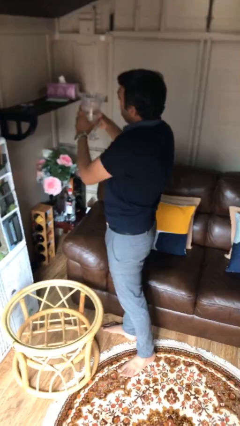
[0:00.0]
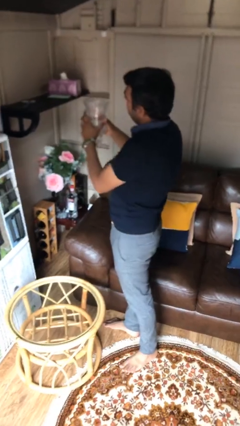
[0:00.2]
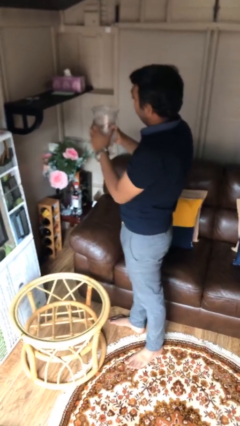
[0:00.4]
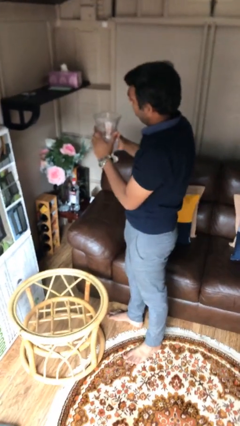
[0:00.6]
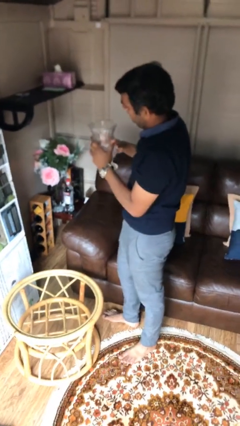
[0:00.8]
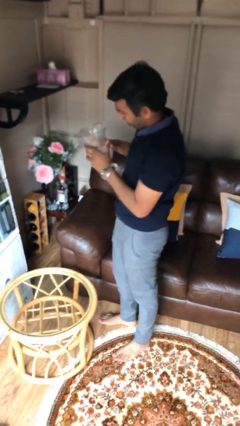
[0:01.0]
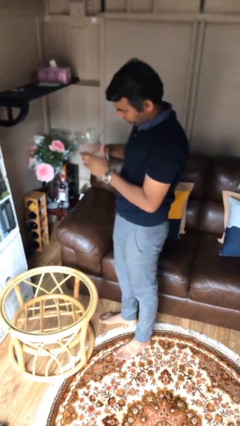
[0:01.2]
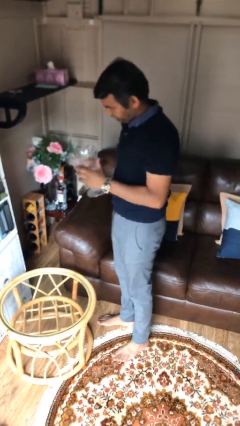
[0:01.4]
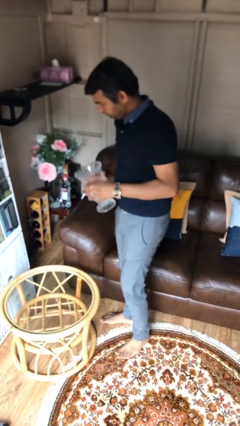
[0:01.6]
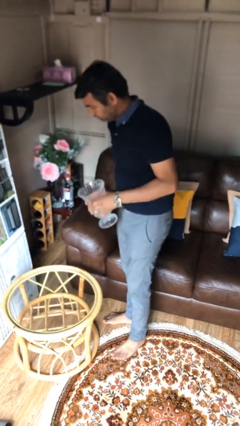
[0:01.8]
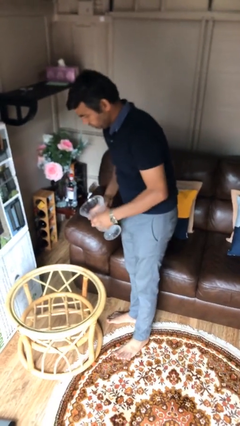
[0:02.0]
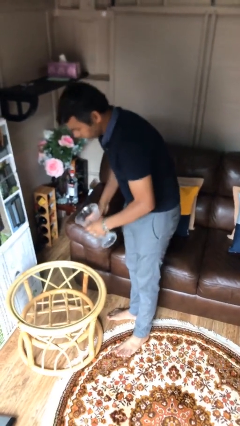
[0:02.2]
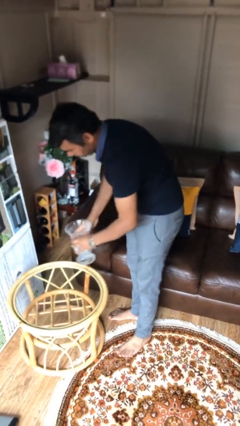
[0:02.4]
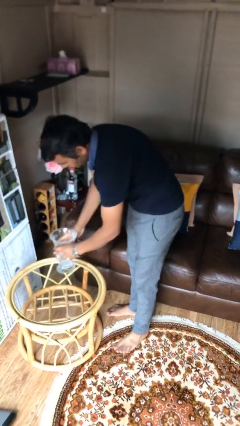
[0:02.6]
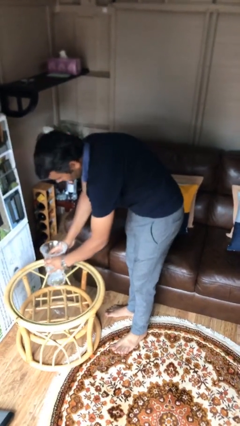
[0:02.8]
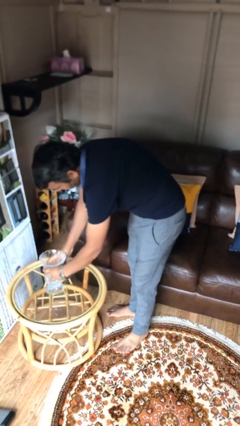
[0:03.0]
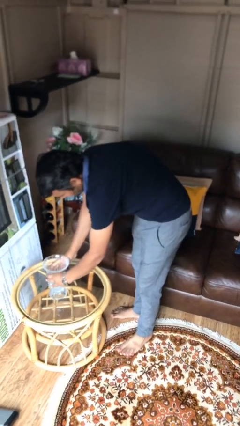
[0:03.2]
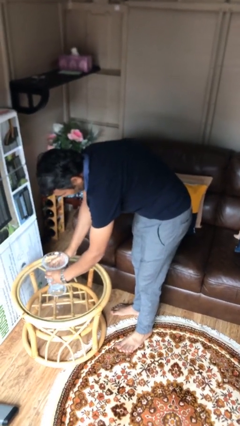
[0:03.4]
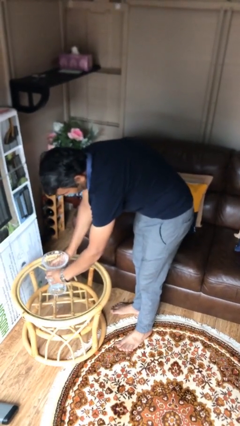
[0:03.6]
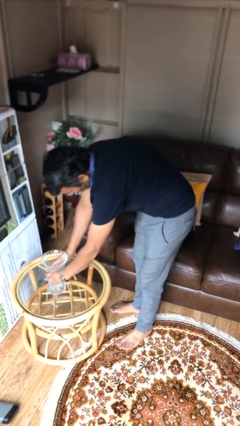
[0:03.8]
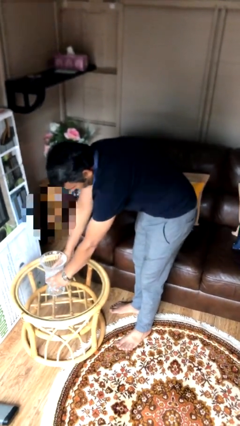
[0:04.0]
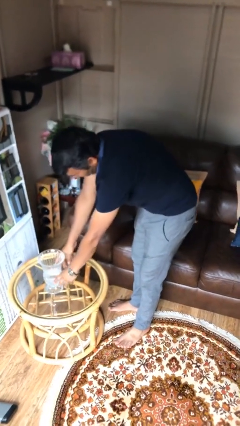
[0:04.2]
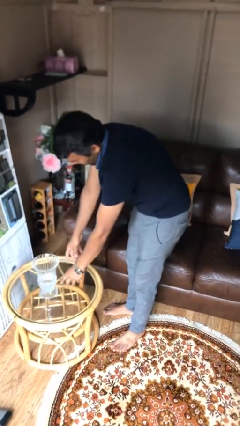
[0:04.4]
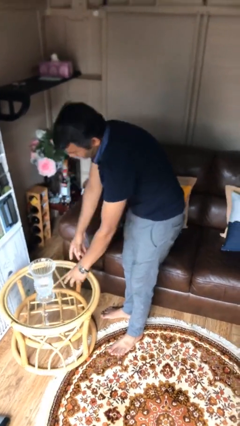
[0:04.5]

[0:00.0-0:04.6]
person puts down object on table

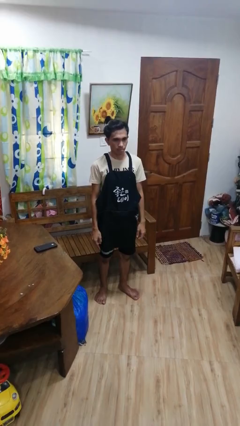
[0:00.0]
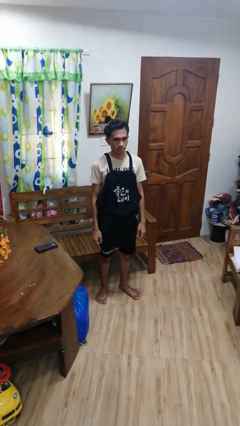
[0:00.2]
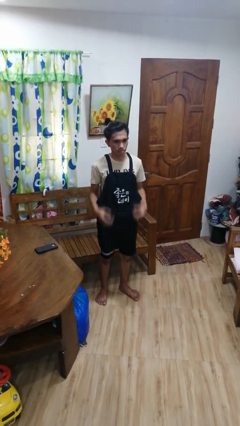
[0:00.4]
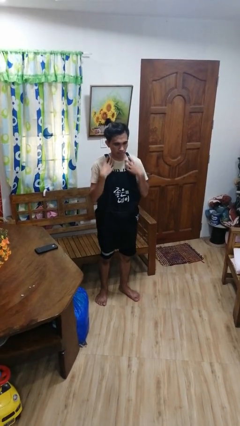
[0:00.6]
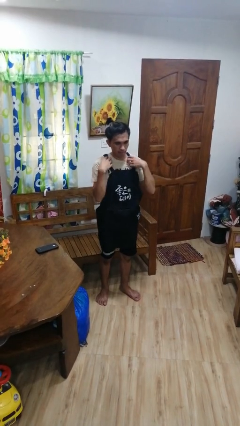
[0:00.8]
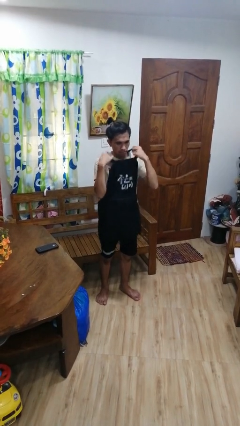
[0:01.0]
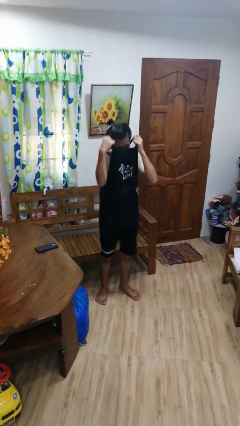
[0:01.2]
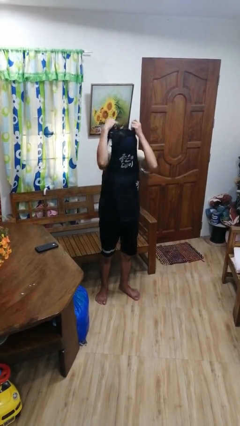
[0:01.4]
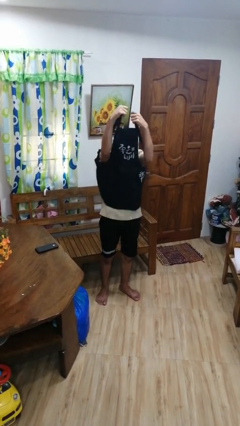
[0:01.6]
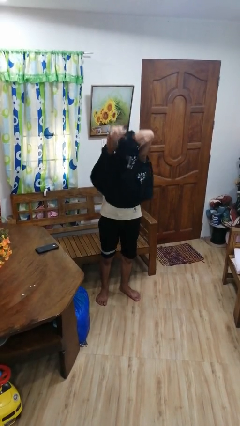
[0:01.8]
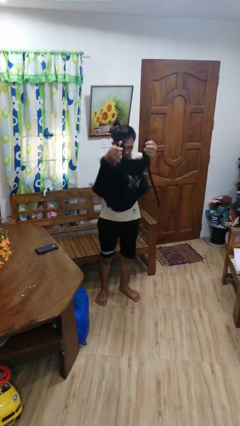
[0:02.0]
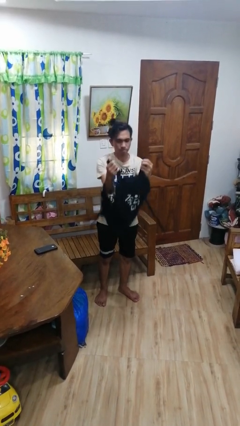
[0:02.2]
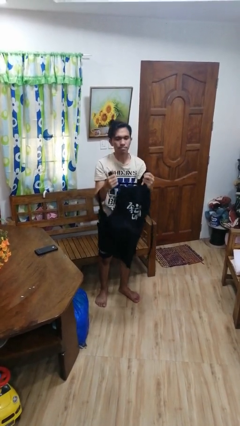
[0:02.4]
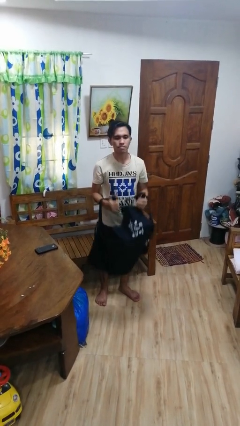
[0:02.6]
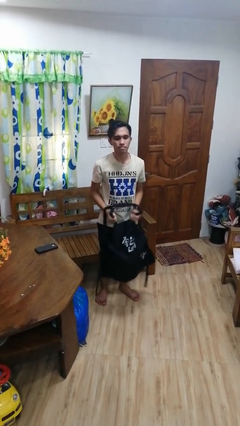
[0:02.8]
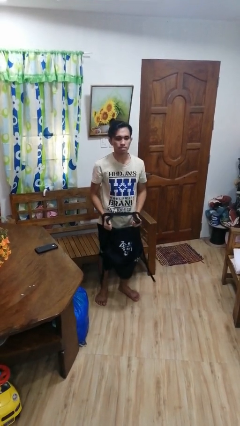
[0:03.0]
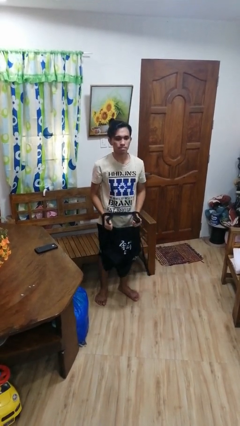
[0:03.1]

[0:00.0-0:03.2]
person takes off apron

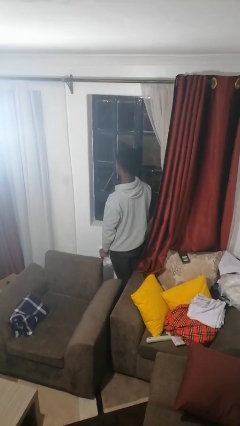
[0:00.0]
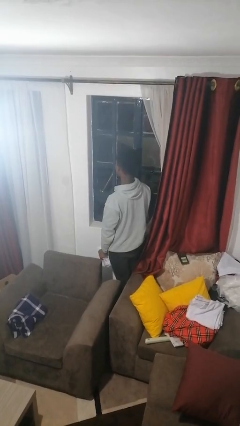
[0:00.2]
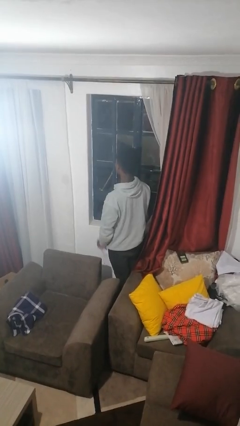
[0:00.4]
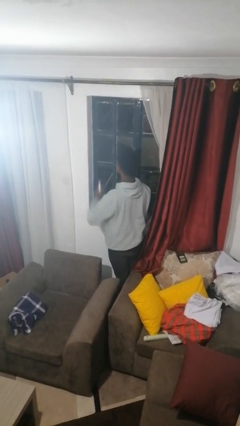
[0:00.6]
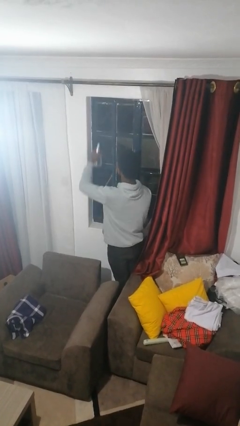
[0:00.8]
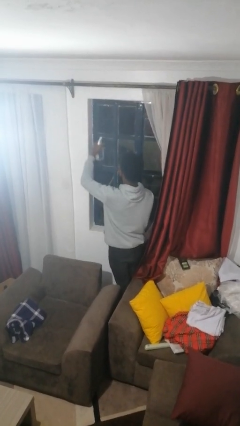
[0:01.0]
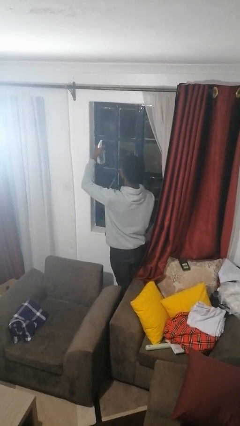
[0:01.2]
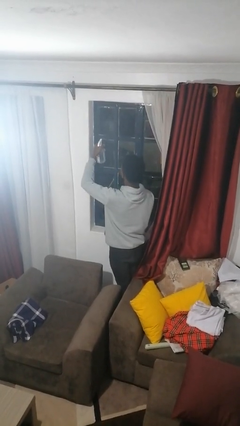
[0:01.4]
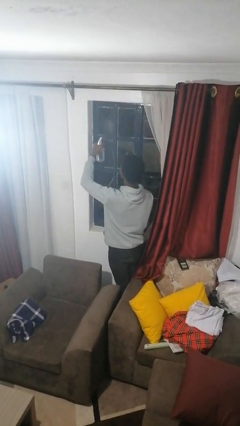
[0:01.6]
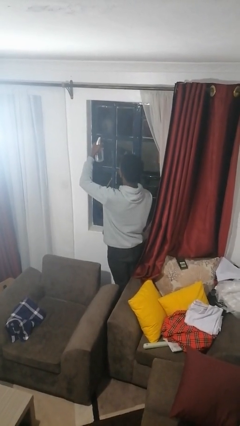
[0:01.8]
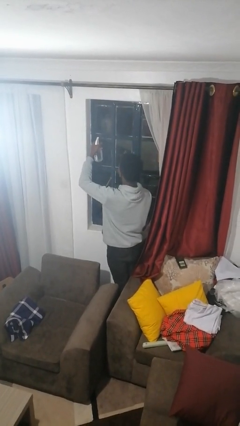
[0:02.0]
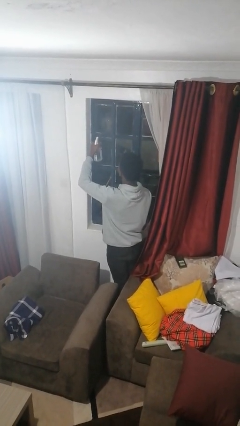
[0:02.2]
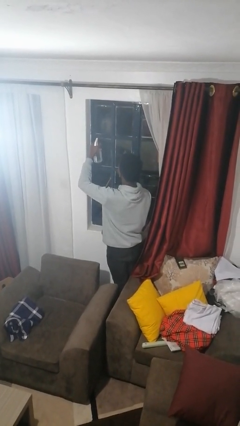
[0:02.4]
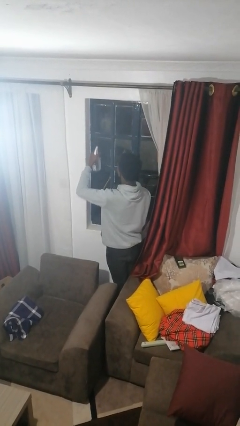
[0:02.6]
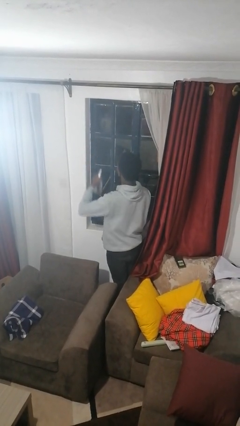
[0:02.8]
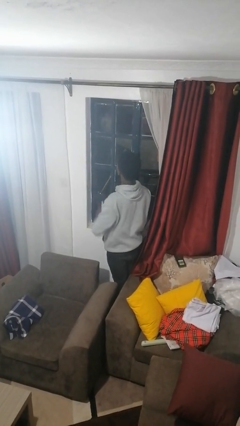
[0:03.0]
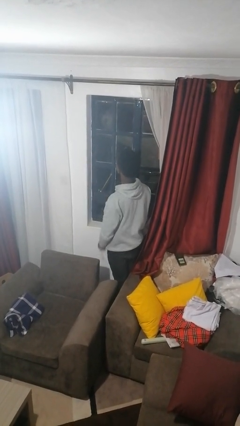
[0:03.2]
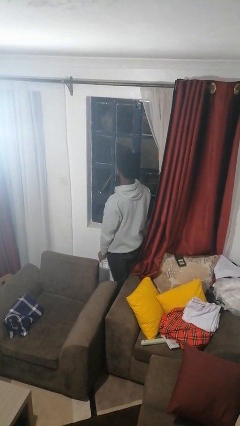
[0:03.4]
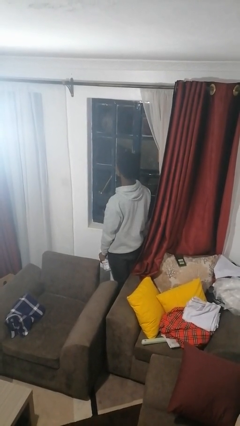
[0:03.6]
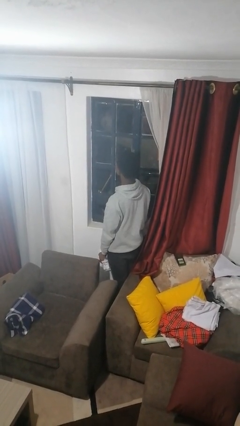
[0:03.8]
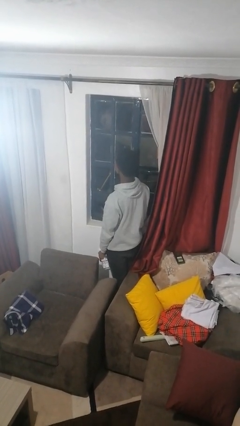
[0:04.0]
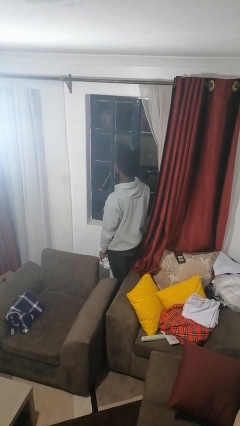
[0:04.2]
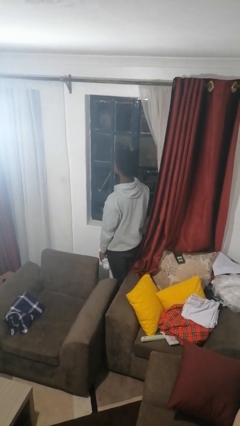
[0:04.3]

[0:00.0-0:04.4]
person sprays from bottle

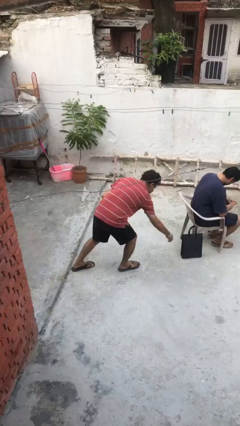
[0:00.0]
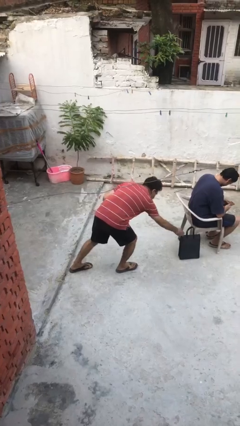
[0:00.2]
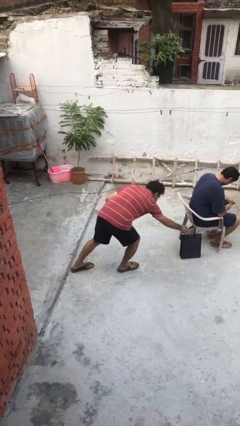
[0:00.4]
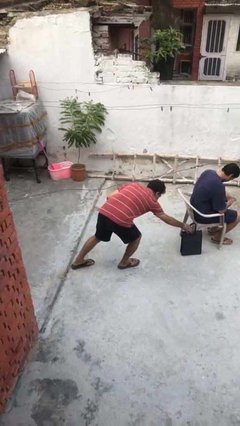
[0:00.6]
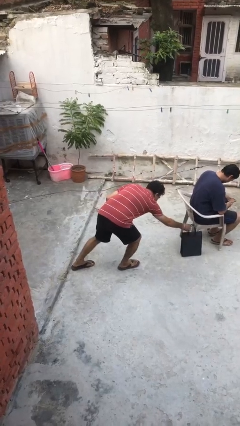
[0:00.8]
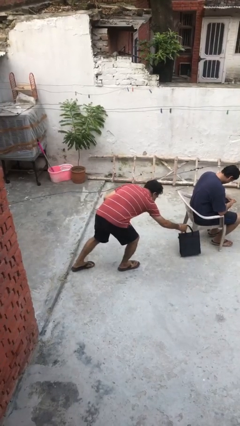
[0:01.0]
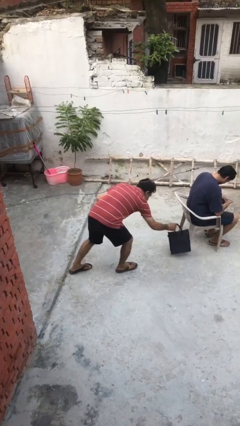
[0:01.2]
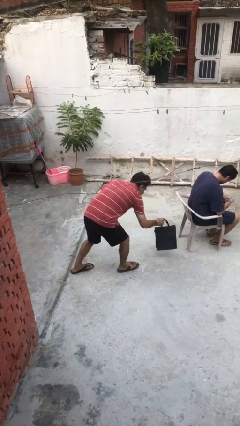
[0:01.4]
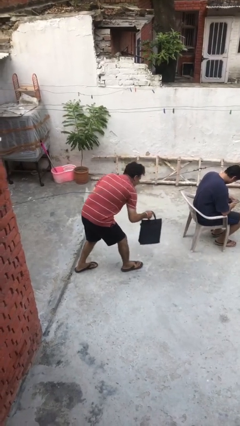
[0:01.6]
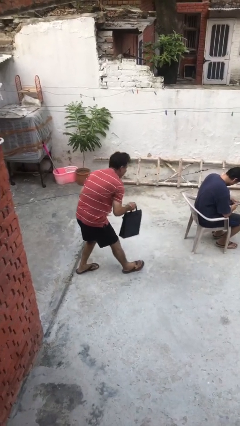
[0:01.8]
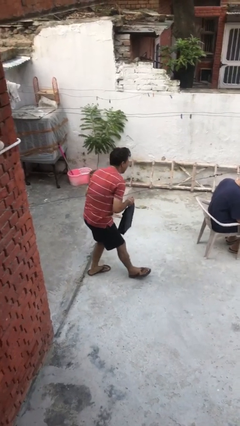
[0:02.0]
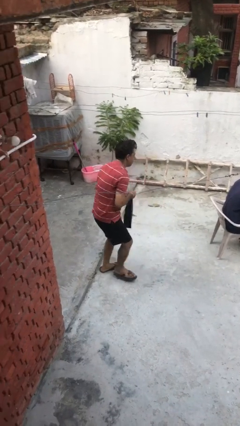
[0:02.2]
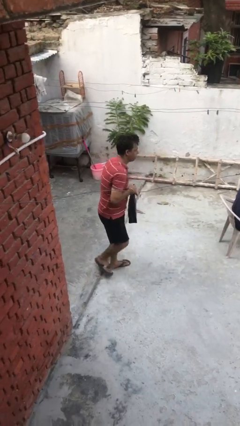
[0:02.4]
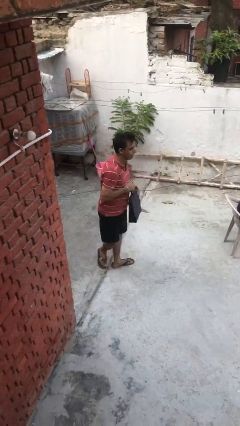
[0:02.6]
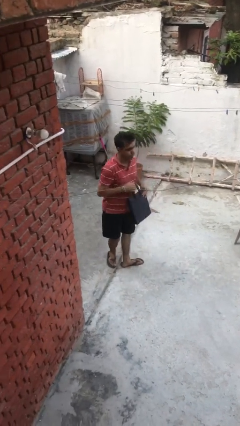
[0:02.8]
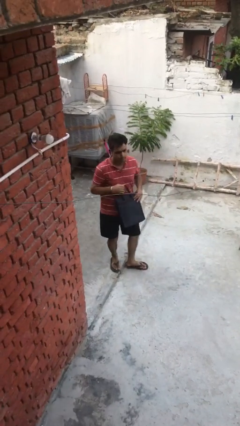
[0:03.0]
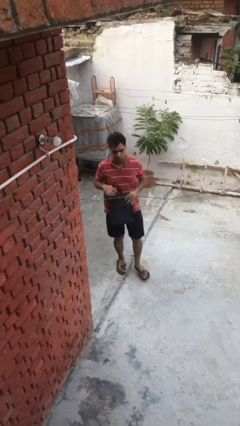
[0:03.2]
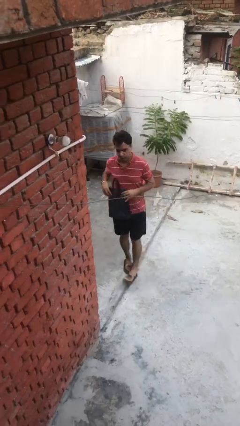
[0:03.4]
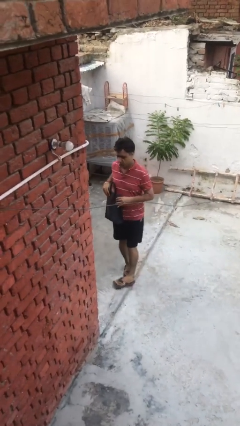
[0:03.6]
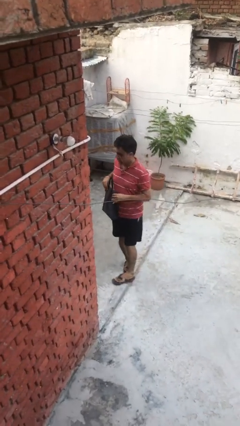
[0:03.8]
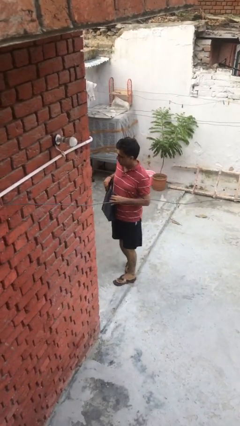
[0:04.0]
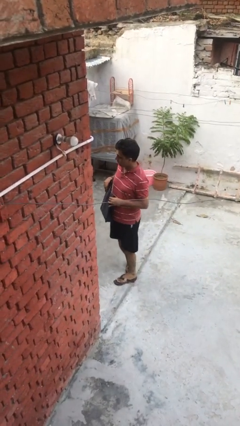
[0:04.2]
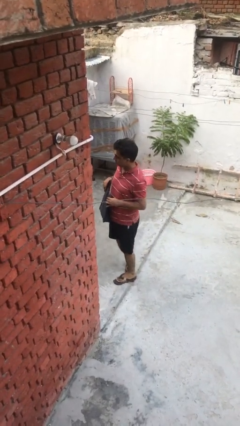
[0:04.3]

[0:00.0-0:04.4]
person steals object from person

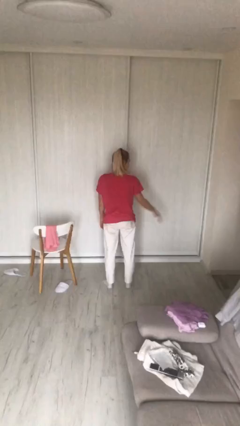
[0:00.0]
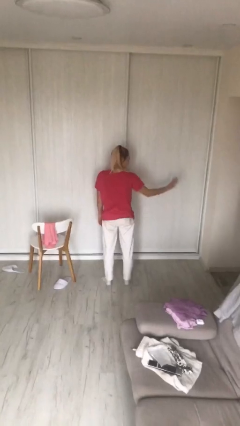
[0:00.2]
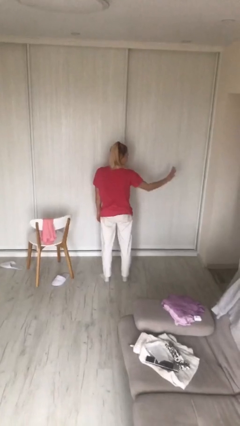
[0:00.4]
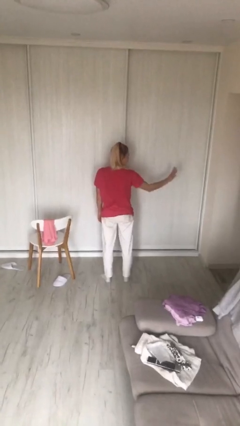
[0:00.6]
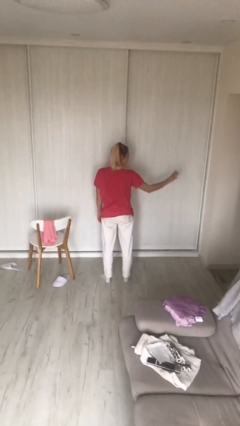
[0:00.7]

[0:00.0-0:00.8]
person gestures stop
